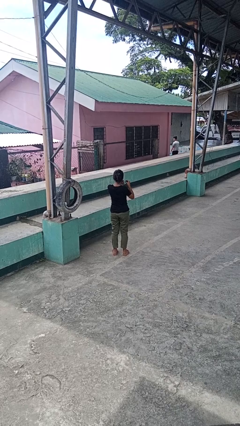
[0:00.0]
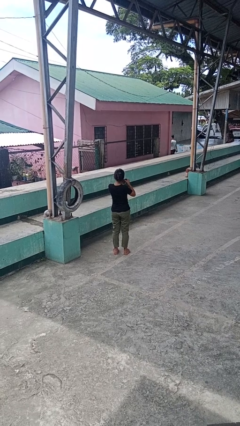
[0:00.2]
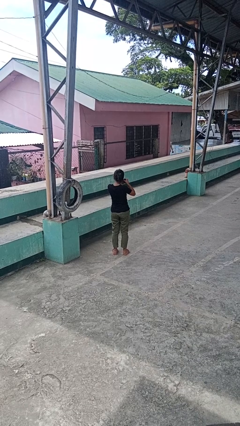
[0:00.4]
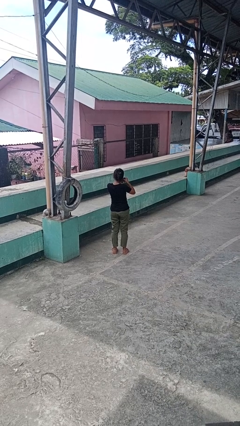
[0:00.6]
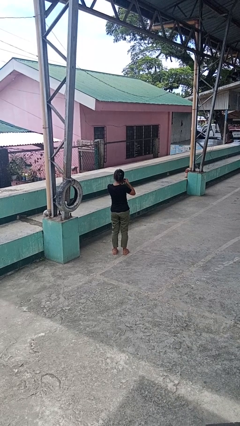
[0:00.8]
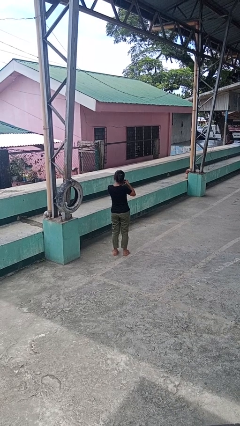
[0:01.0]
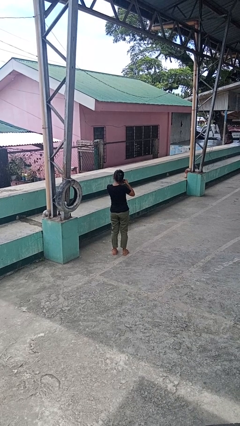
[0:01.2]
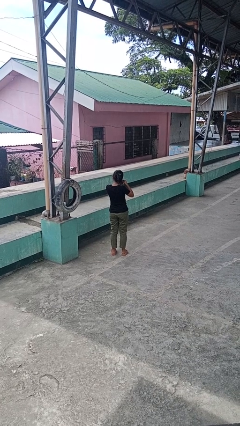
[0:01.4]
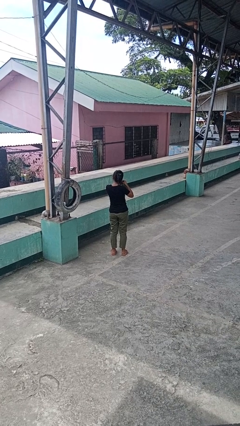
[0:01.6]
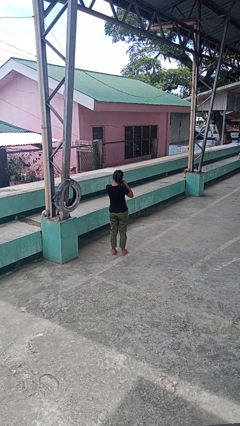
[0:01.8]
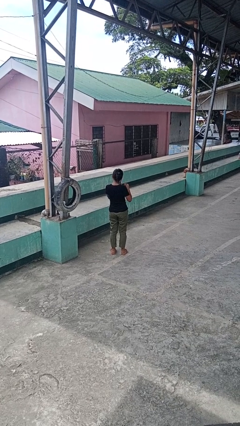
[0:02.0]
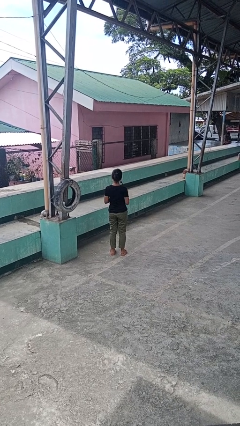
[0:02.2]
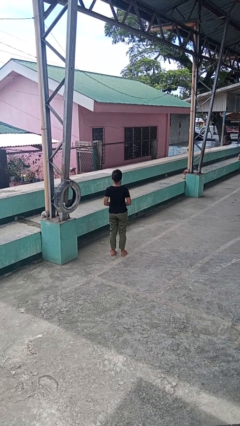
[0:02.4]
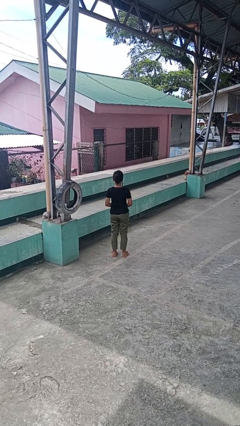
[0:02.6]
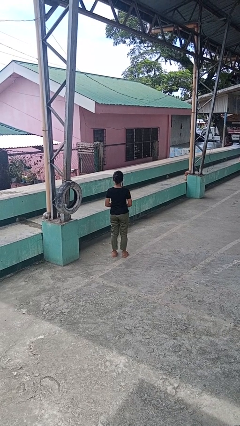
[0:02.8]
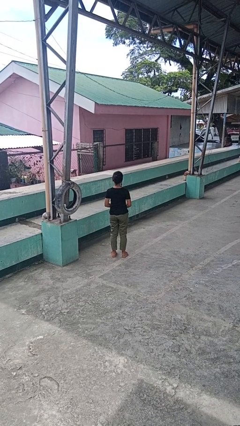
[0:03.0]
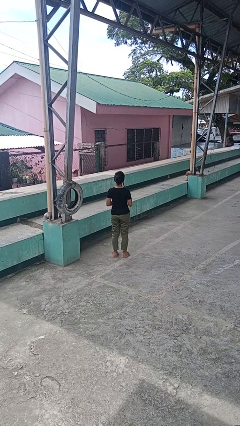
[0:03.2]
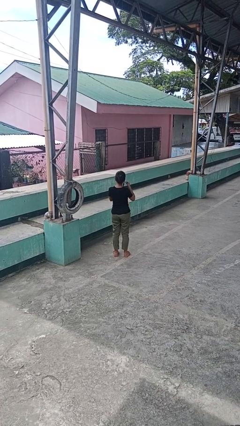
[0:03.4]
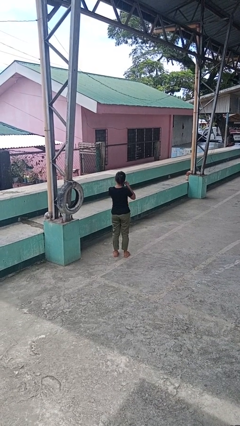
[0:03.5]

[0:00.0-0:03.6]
person puts on earrings

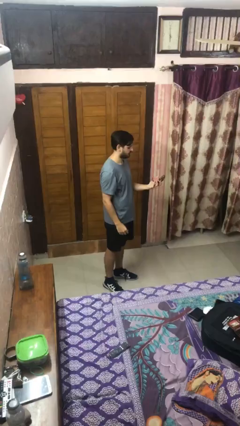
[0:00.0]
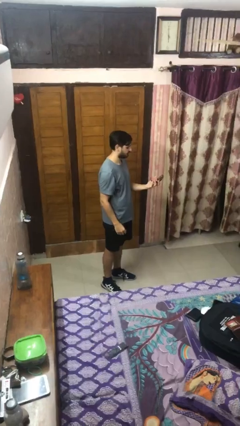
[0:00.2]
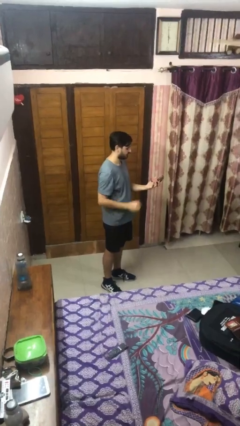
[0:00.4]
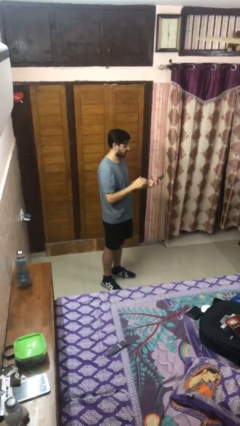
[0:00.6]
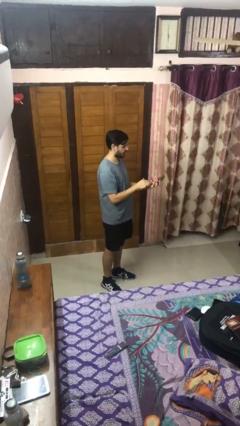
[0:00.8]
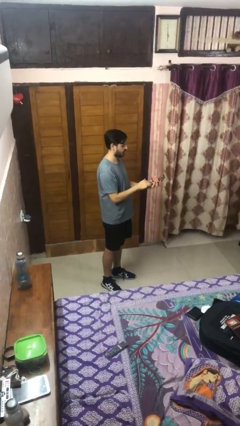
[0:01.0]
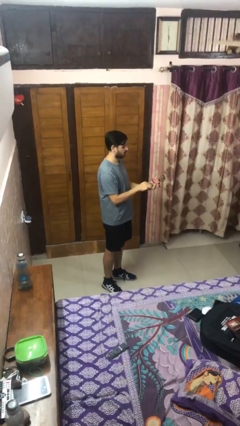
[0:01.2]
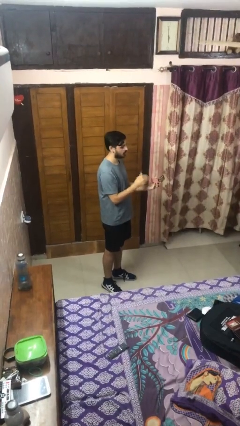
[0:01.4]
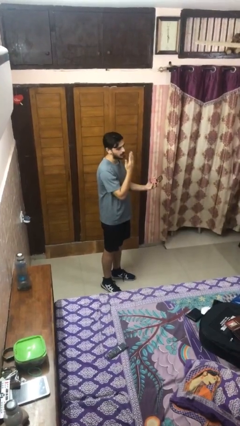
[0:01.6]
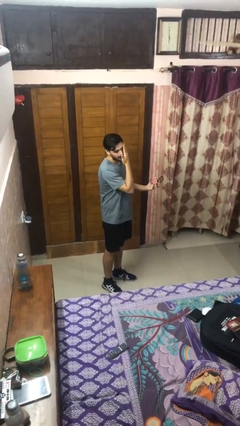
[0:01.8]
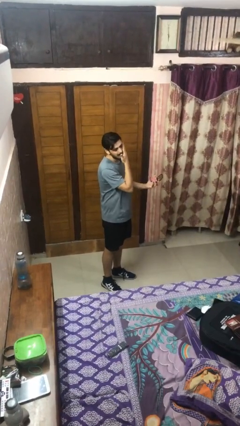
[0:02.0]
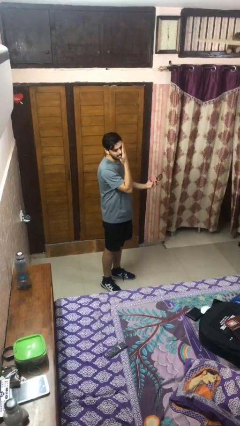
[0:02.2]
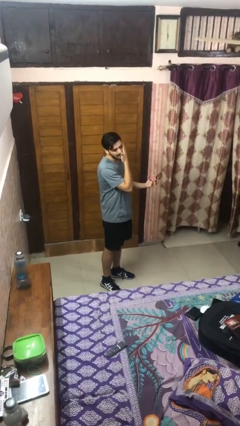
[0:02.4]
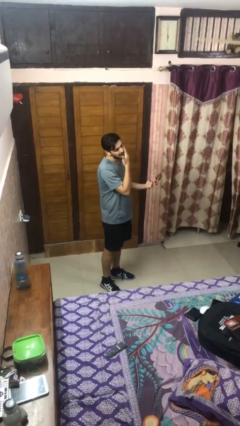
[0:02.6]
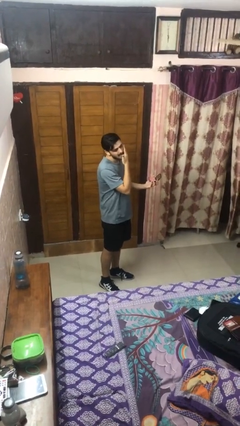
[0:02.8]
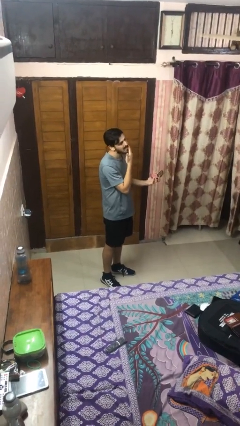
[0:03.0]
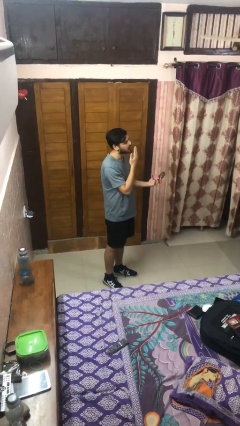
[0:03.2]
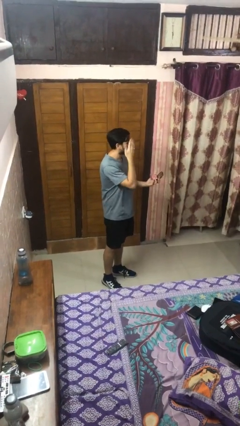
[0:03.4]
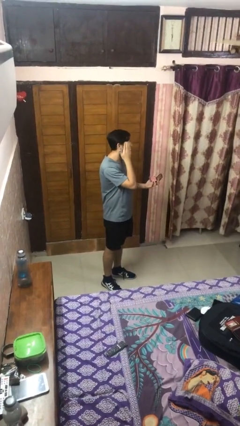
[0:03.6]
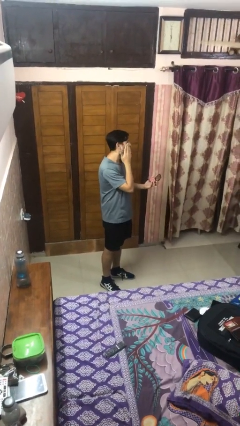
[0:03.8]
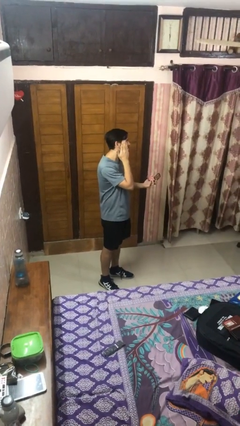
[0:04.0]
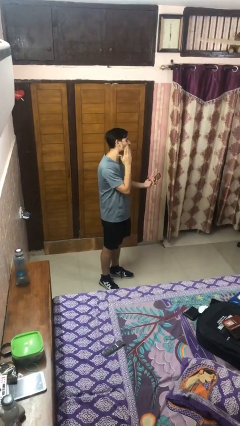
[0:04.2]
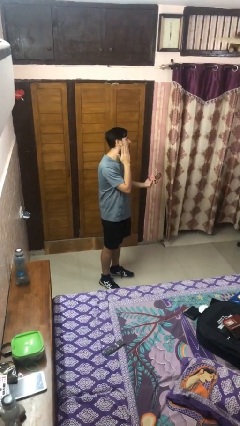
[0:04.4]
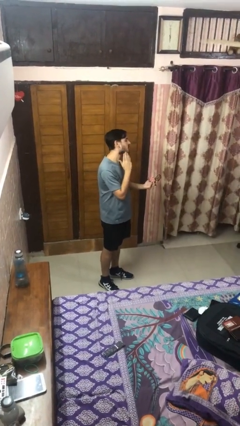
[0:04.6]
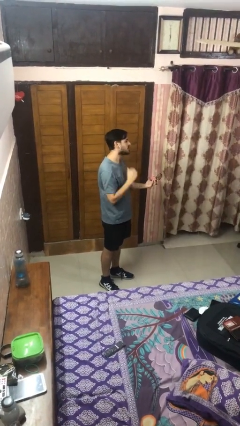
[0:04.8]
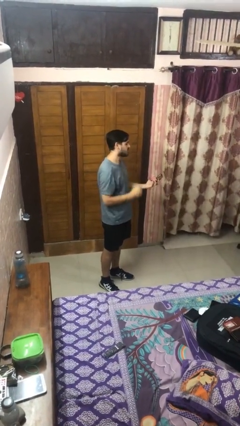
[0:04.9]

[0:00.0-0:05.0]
person applies foundation makeup

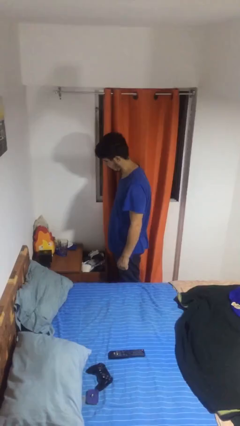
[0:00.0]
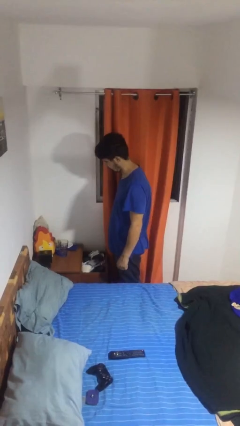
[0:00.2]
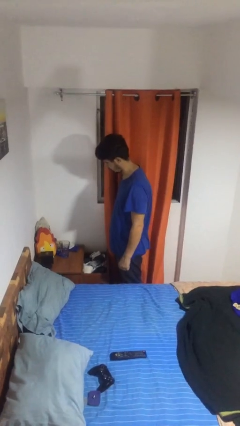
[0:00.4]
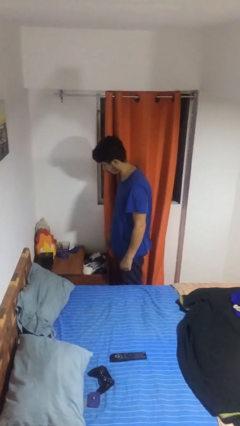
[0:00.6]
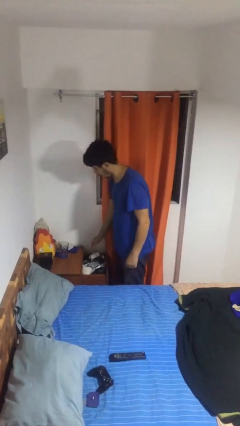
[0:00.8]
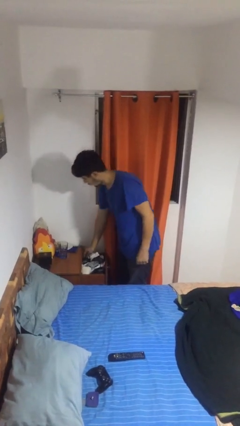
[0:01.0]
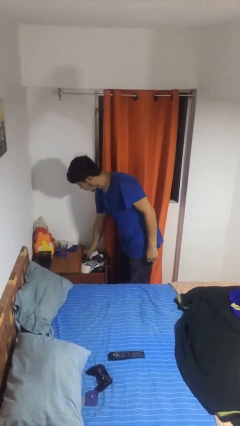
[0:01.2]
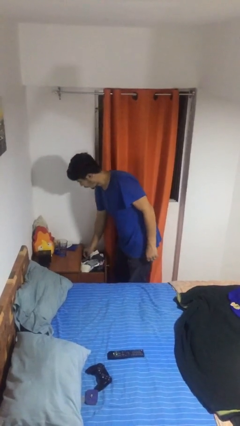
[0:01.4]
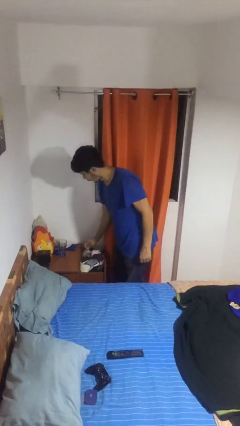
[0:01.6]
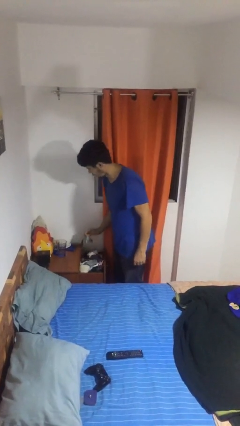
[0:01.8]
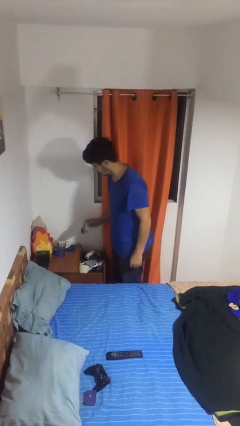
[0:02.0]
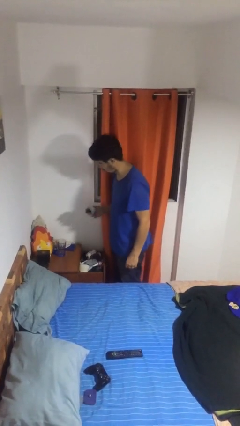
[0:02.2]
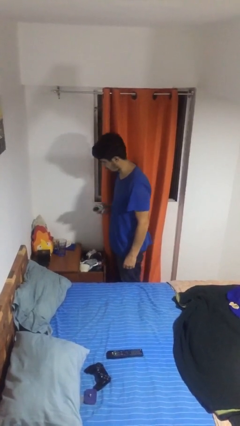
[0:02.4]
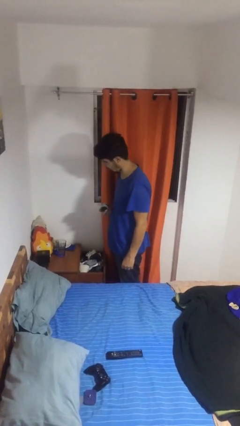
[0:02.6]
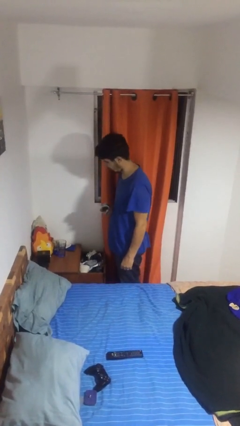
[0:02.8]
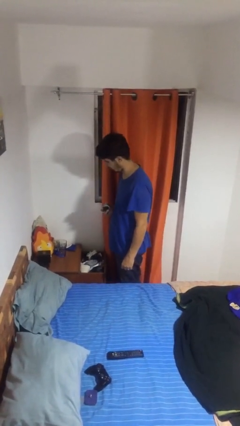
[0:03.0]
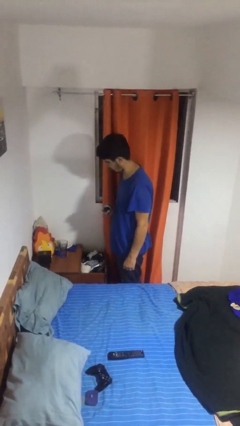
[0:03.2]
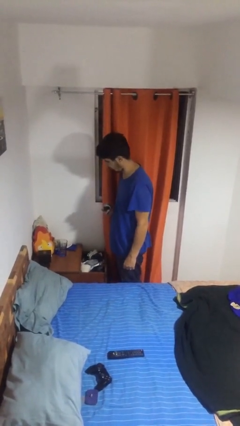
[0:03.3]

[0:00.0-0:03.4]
person takes clothes from dresser

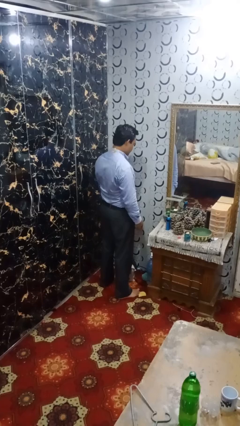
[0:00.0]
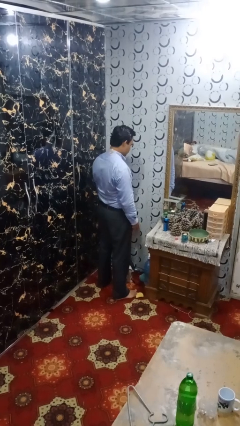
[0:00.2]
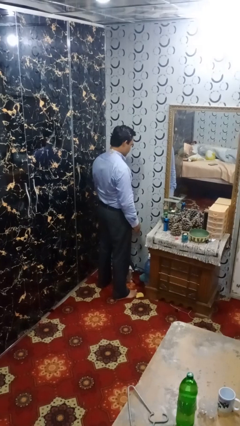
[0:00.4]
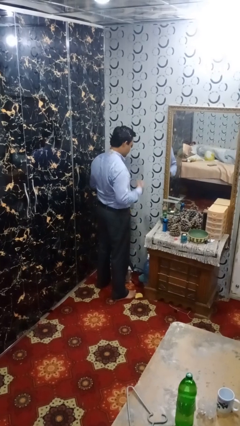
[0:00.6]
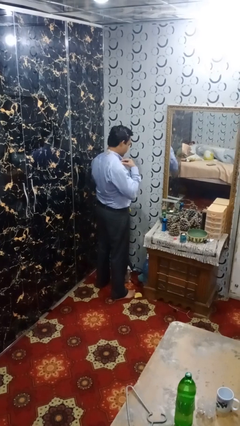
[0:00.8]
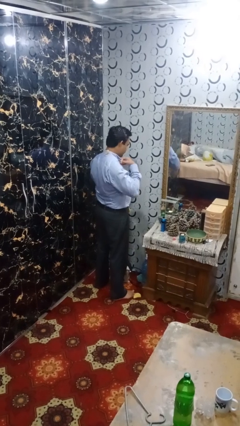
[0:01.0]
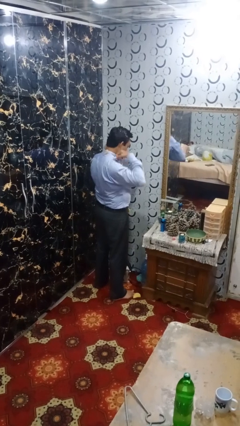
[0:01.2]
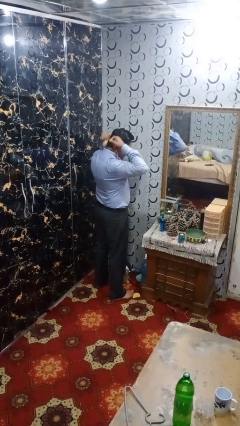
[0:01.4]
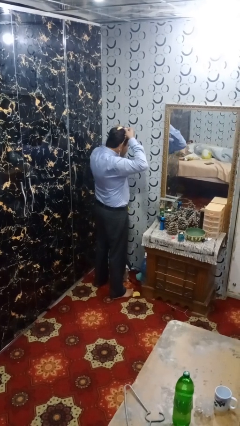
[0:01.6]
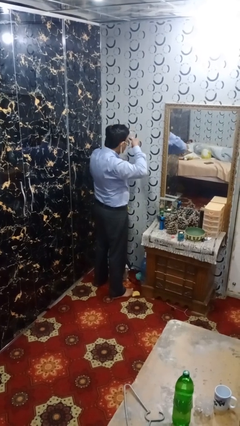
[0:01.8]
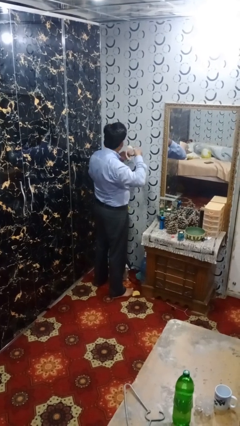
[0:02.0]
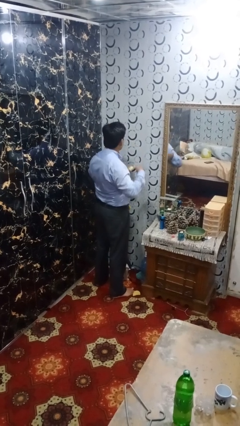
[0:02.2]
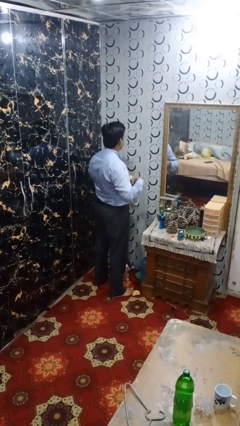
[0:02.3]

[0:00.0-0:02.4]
person takes off necklace

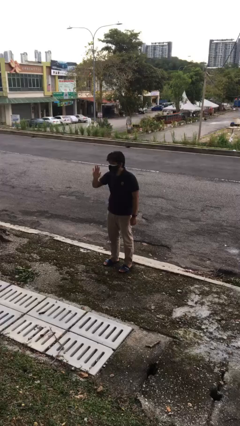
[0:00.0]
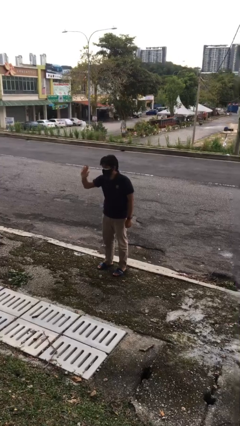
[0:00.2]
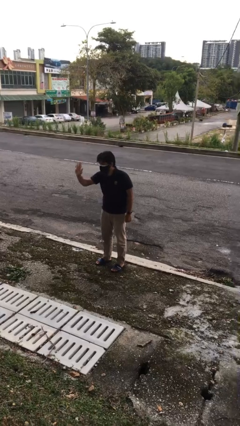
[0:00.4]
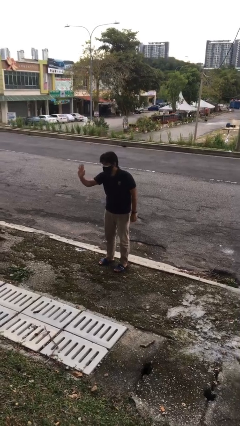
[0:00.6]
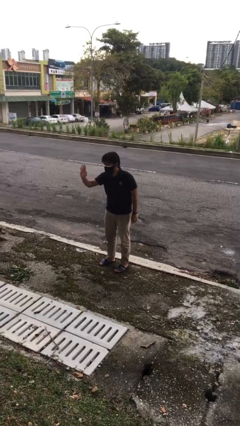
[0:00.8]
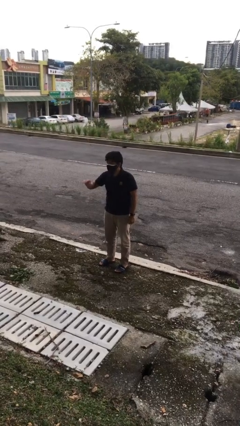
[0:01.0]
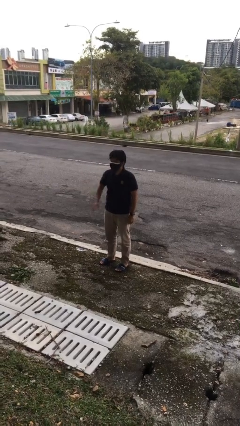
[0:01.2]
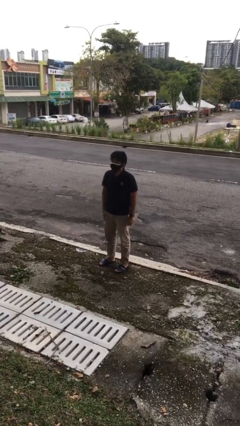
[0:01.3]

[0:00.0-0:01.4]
person gestures stop

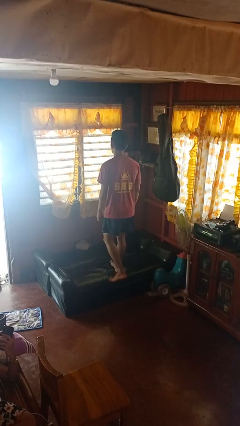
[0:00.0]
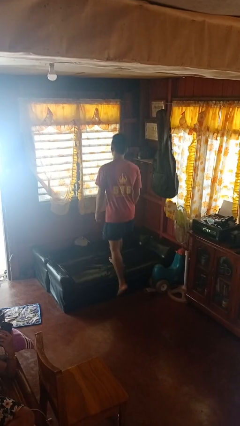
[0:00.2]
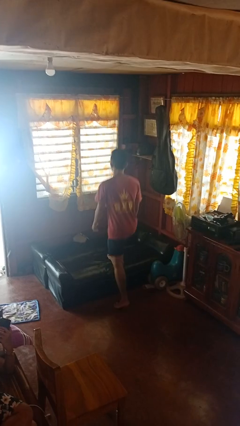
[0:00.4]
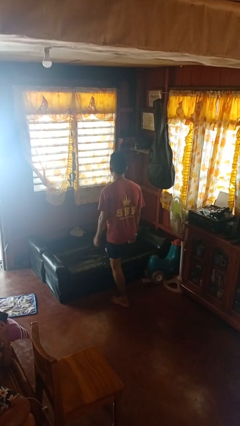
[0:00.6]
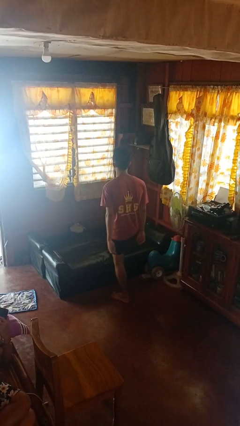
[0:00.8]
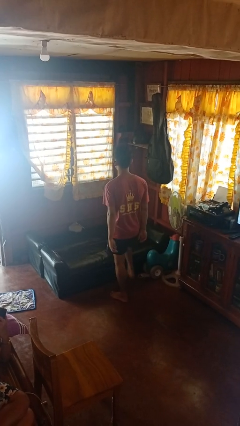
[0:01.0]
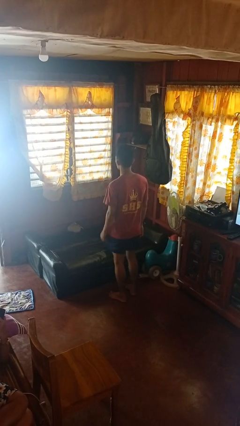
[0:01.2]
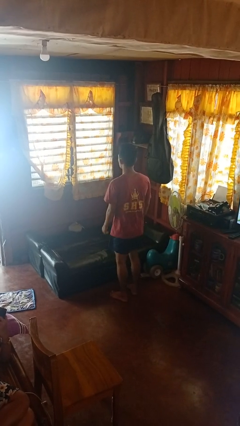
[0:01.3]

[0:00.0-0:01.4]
person climbs off couch

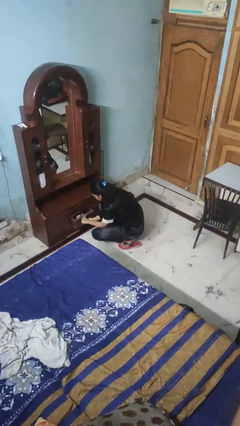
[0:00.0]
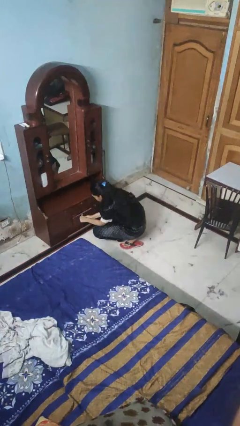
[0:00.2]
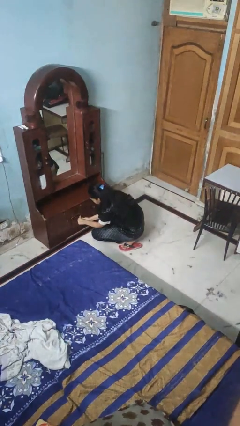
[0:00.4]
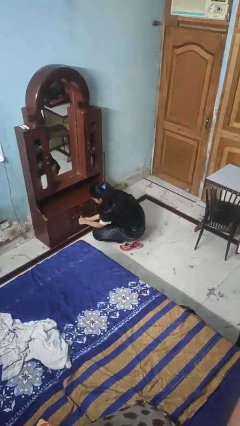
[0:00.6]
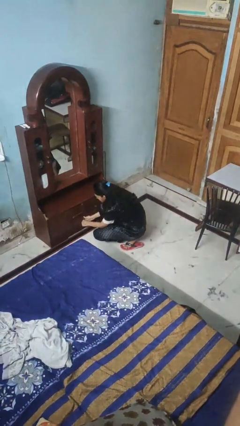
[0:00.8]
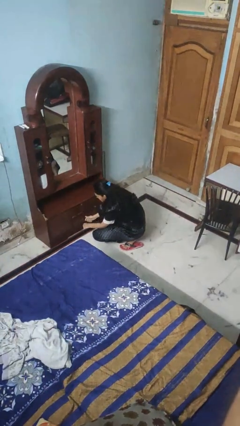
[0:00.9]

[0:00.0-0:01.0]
person closes dresser drawer
